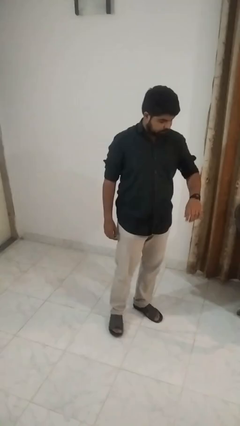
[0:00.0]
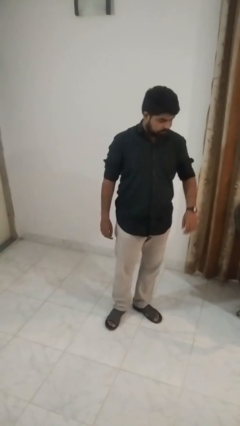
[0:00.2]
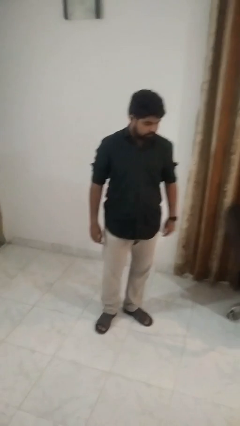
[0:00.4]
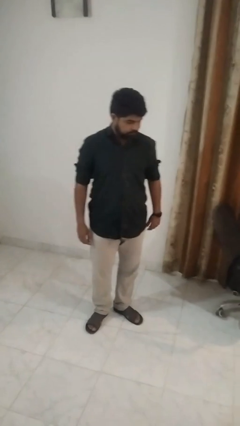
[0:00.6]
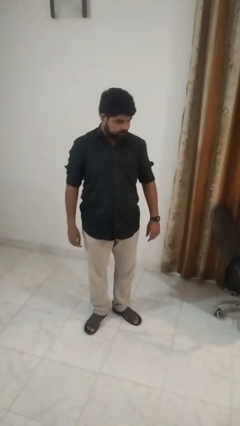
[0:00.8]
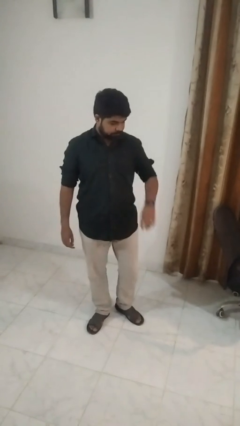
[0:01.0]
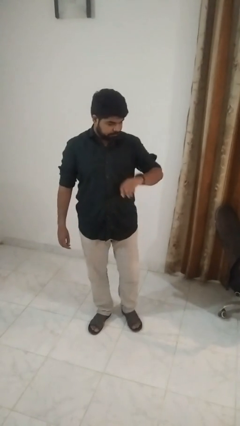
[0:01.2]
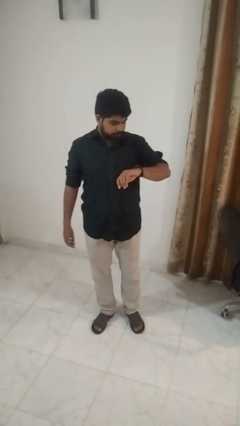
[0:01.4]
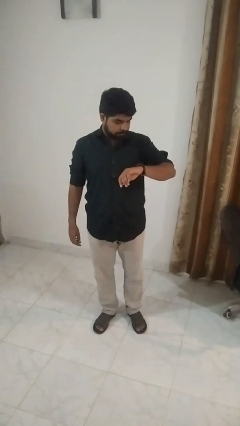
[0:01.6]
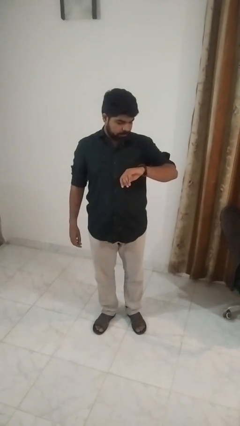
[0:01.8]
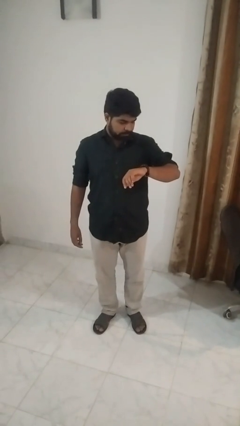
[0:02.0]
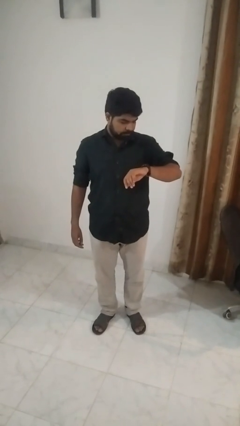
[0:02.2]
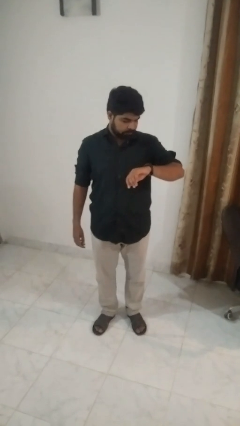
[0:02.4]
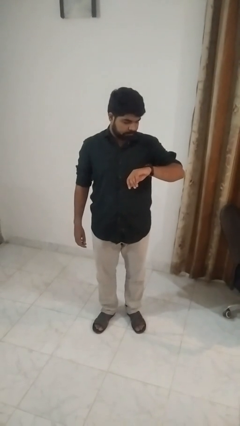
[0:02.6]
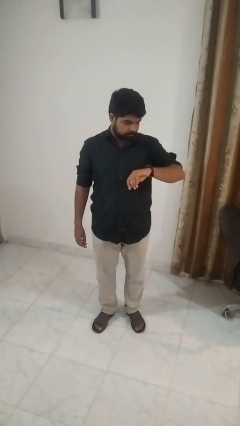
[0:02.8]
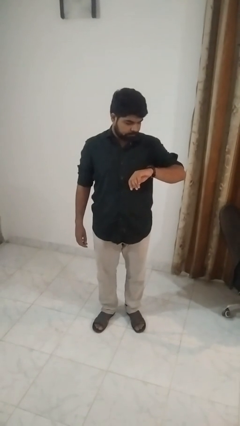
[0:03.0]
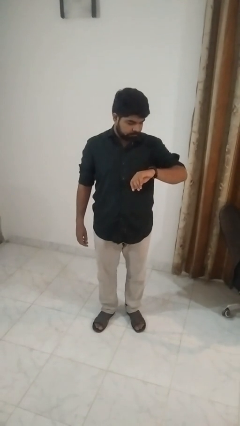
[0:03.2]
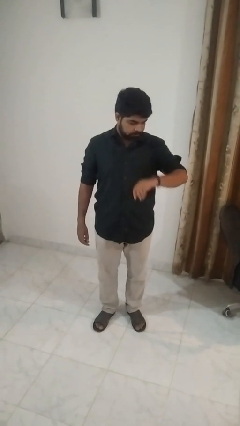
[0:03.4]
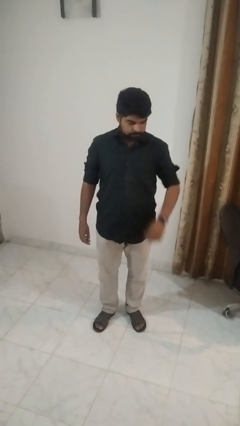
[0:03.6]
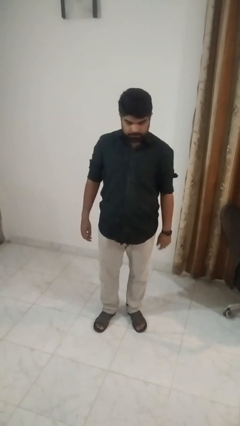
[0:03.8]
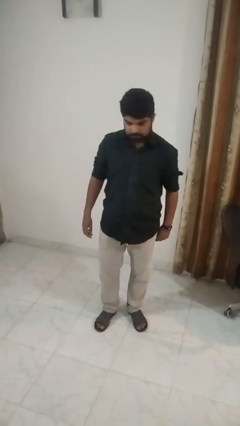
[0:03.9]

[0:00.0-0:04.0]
person looks at wristwatch

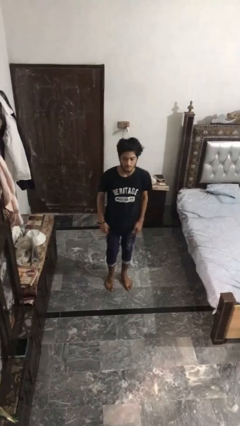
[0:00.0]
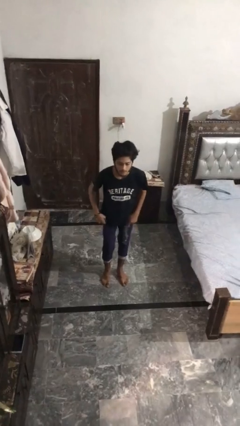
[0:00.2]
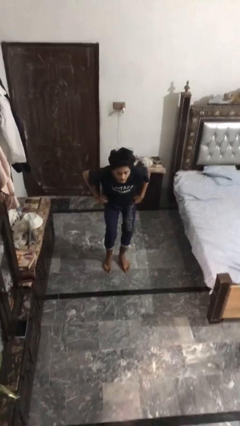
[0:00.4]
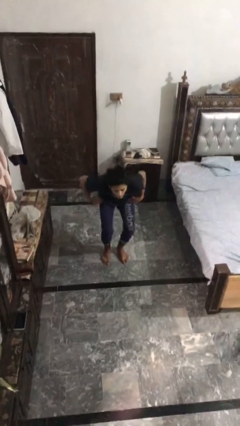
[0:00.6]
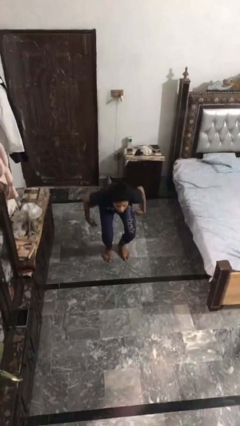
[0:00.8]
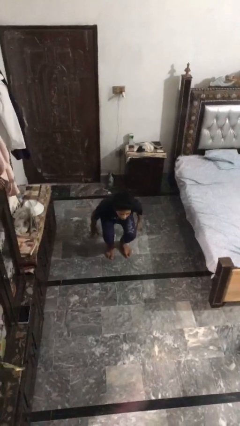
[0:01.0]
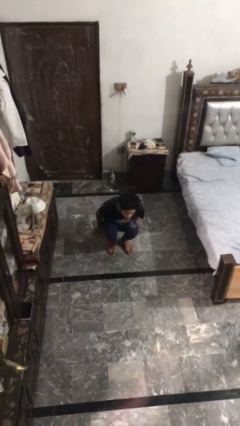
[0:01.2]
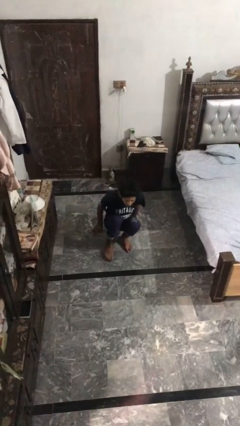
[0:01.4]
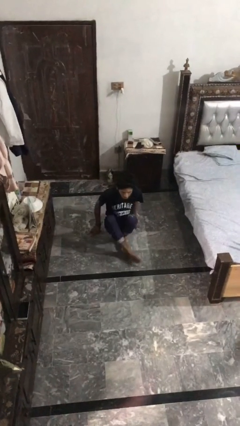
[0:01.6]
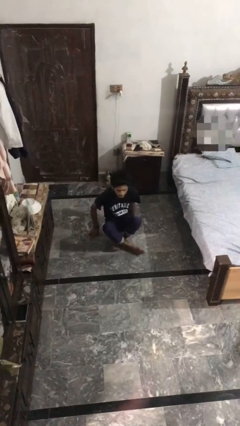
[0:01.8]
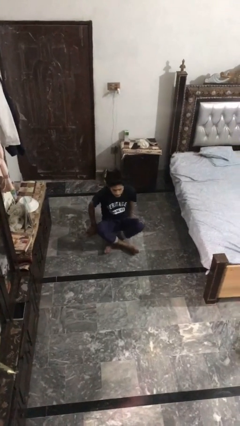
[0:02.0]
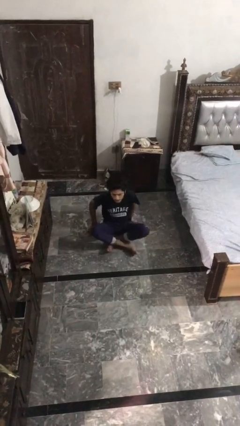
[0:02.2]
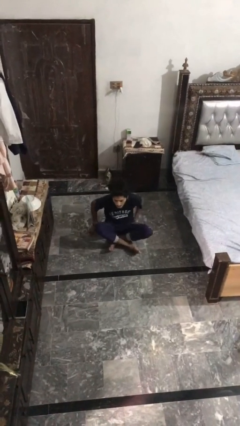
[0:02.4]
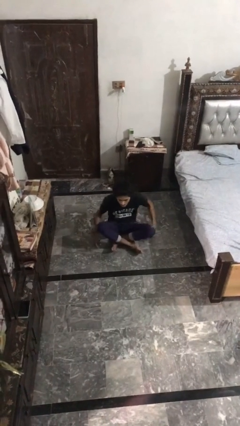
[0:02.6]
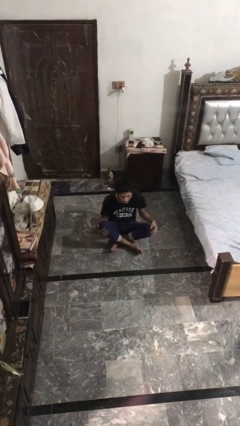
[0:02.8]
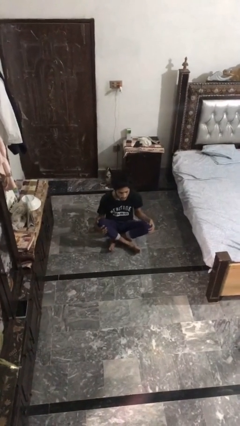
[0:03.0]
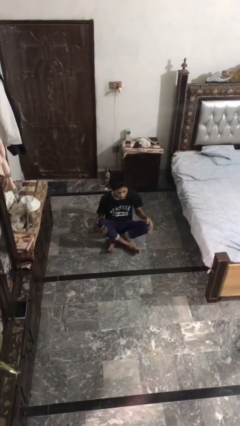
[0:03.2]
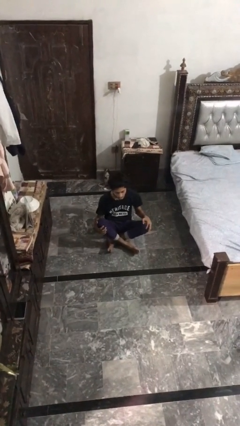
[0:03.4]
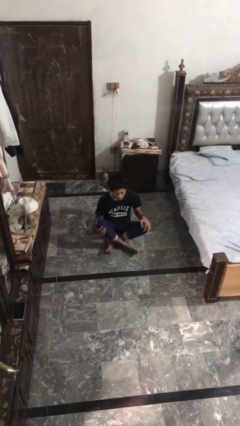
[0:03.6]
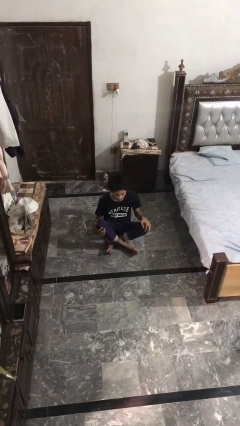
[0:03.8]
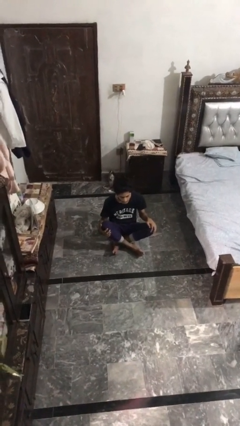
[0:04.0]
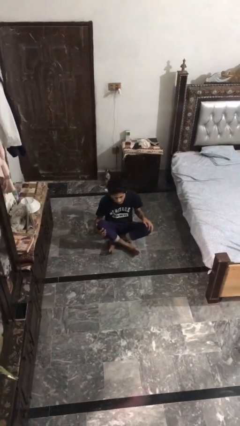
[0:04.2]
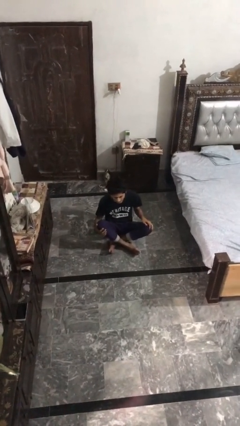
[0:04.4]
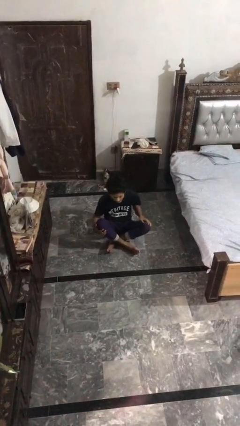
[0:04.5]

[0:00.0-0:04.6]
person sits crisscross

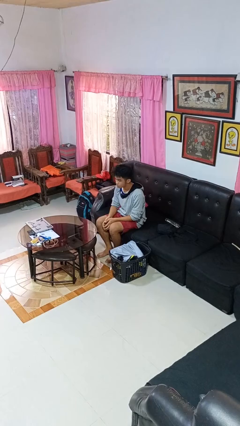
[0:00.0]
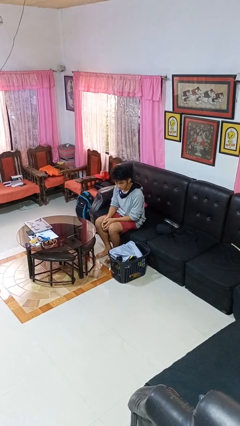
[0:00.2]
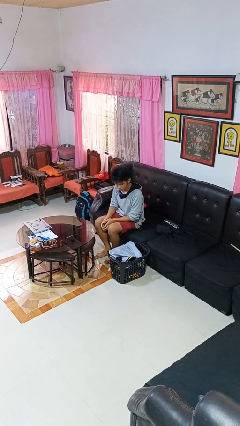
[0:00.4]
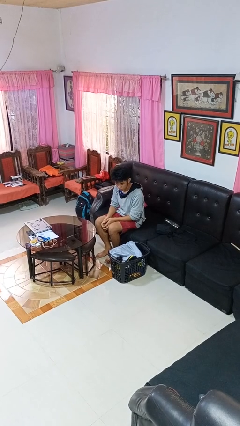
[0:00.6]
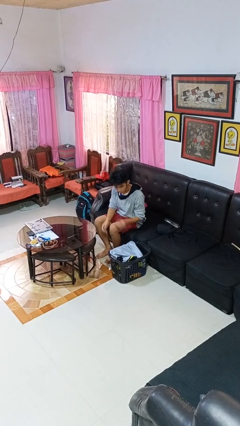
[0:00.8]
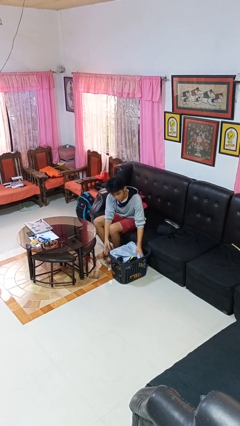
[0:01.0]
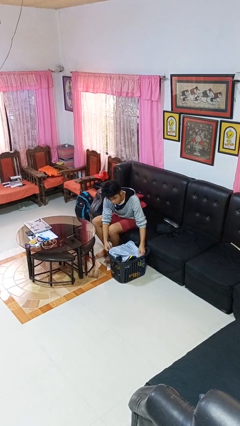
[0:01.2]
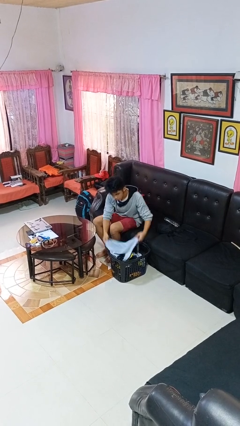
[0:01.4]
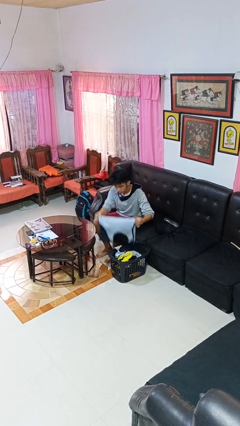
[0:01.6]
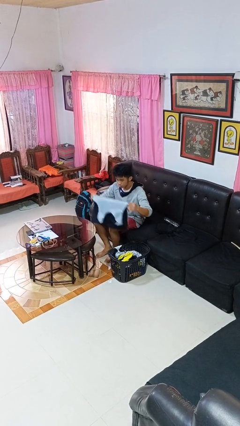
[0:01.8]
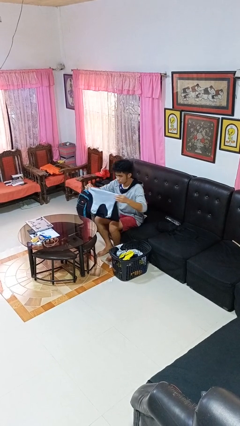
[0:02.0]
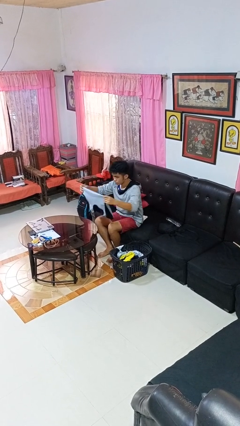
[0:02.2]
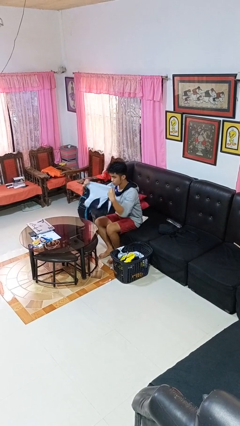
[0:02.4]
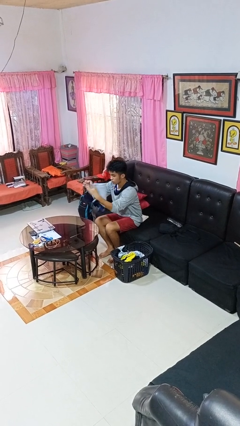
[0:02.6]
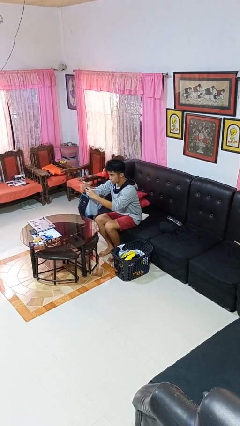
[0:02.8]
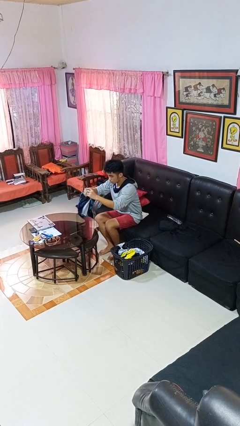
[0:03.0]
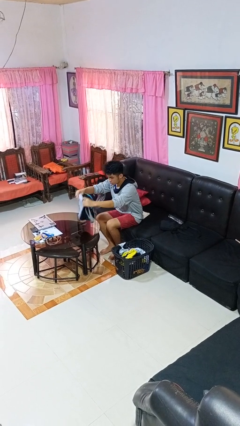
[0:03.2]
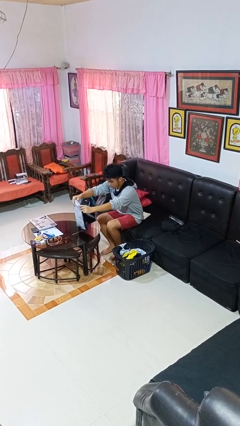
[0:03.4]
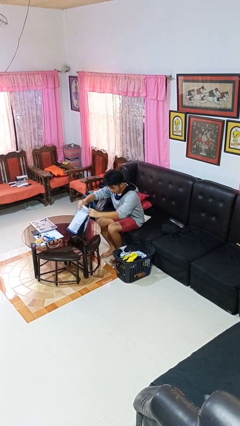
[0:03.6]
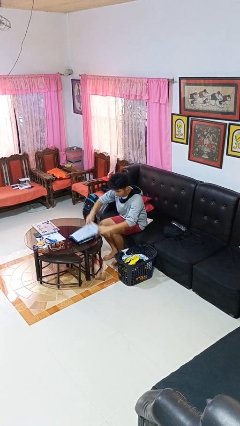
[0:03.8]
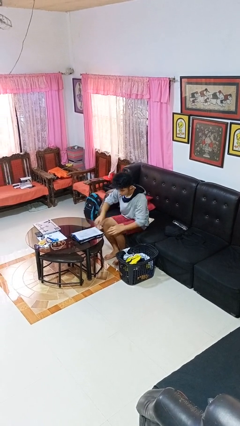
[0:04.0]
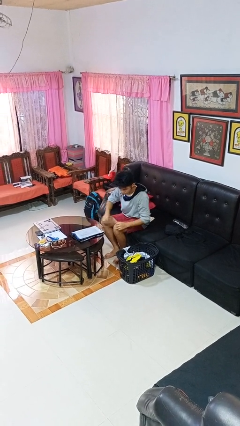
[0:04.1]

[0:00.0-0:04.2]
person folds shirt

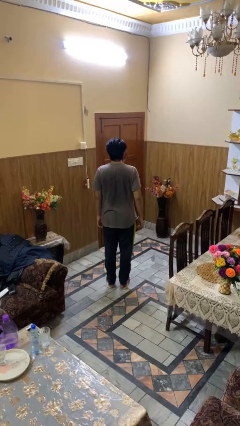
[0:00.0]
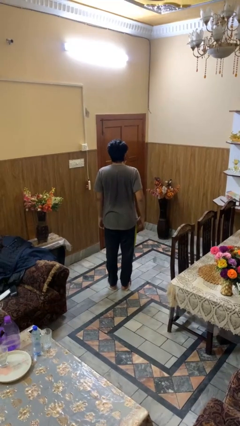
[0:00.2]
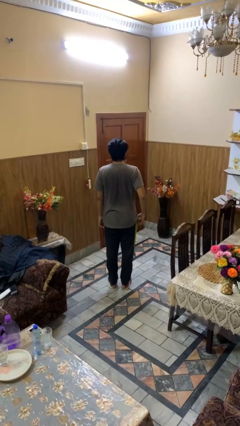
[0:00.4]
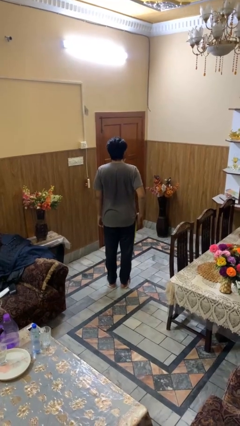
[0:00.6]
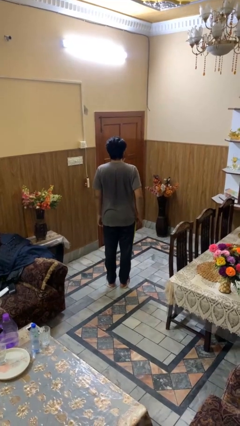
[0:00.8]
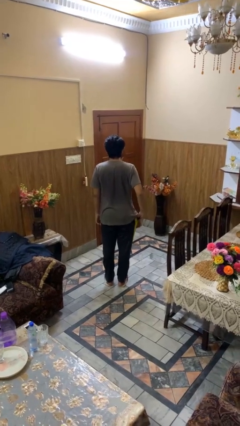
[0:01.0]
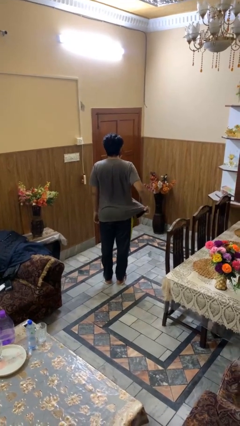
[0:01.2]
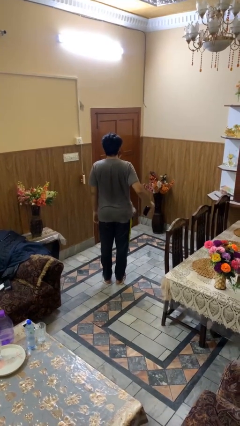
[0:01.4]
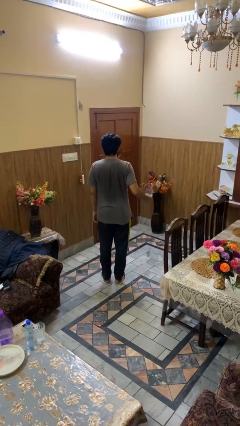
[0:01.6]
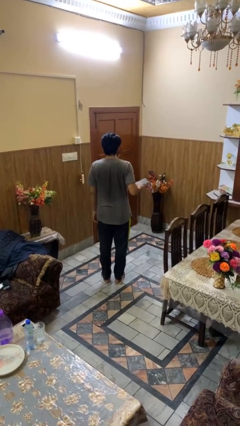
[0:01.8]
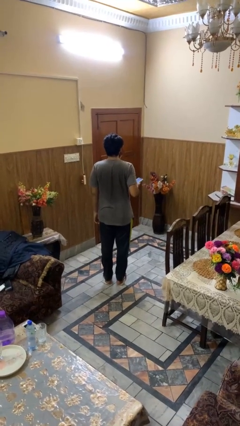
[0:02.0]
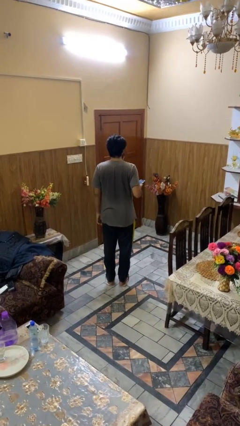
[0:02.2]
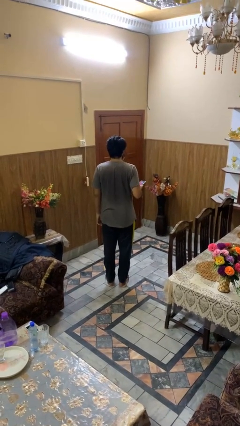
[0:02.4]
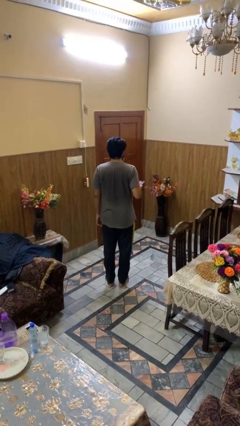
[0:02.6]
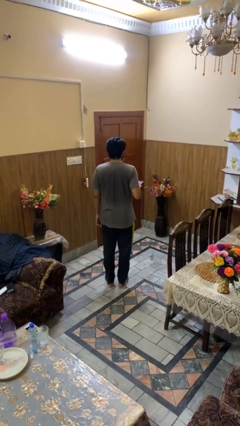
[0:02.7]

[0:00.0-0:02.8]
person takes phone from pocket

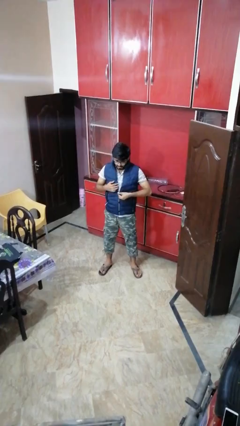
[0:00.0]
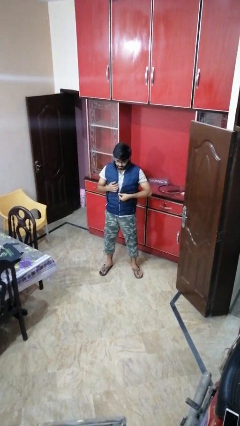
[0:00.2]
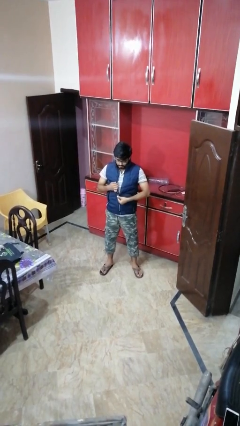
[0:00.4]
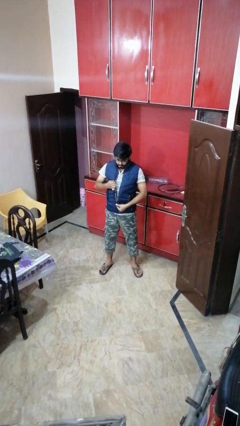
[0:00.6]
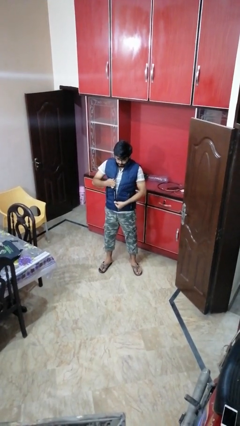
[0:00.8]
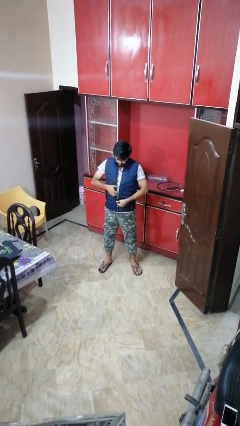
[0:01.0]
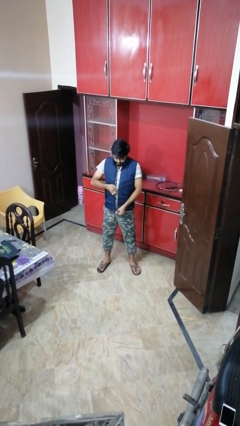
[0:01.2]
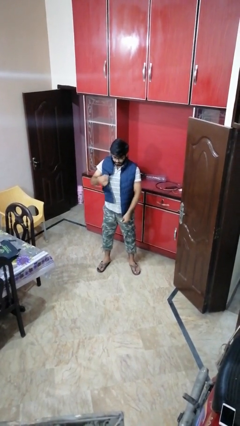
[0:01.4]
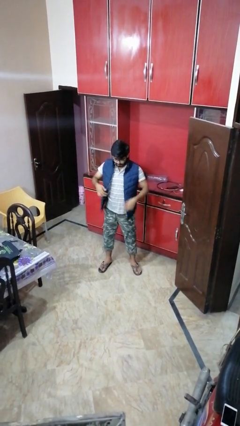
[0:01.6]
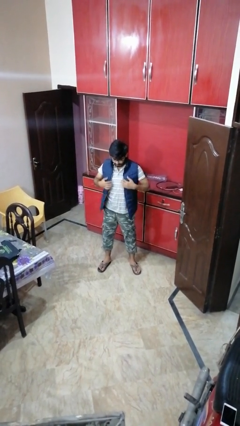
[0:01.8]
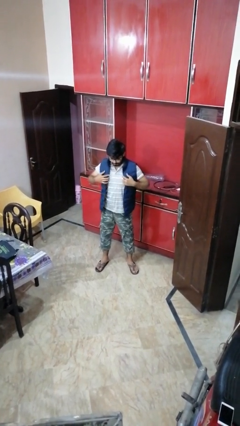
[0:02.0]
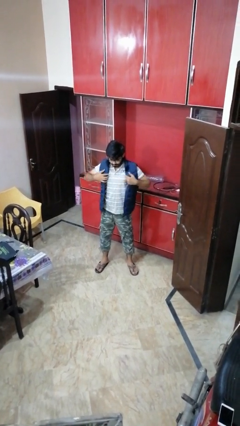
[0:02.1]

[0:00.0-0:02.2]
person unzips jacket
